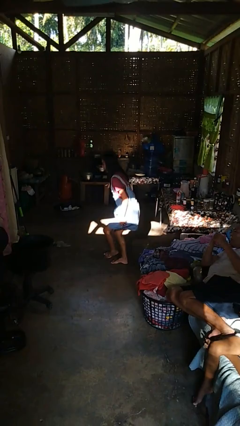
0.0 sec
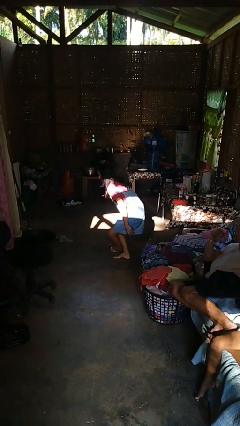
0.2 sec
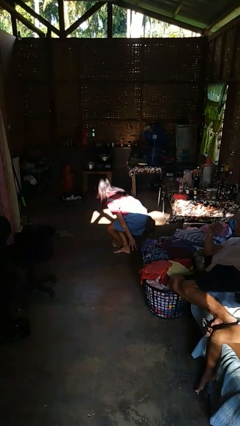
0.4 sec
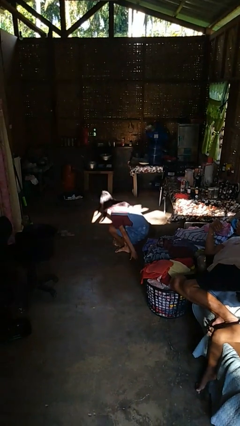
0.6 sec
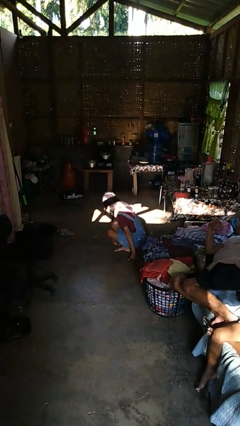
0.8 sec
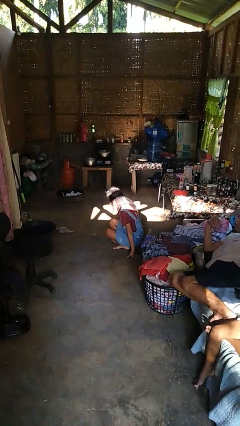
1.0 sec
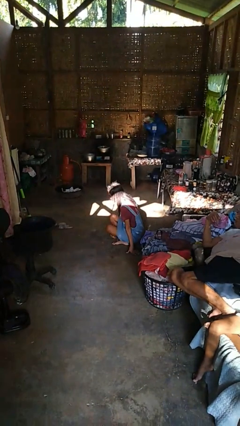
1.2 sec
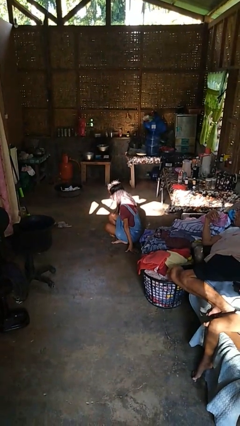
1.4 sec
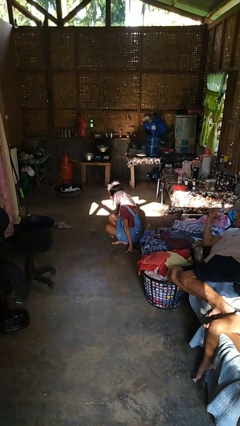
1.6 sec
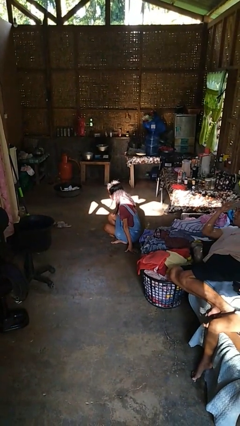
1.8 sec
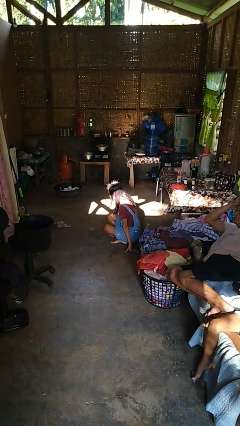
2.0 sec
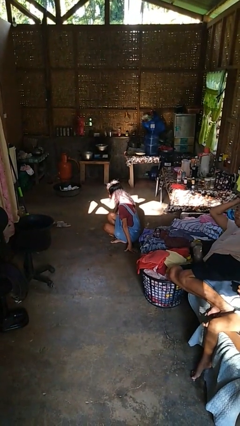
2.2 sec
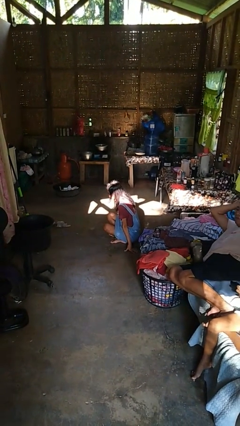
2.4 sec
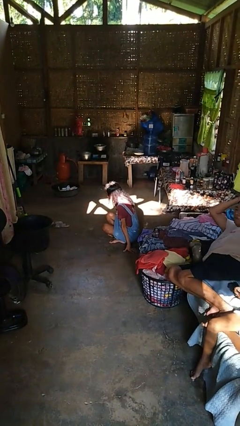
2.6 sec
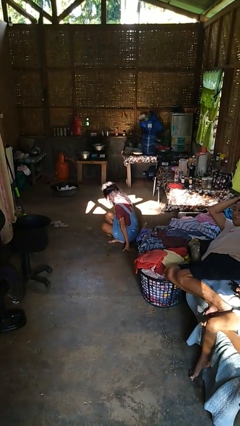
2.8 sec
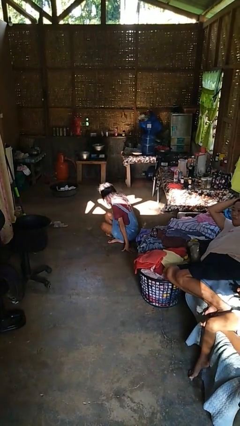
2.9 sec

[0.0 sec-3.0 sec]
person sits crisscross

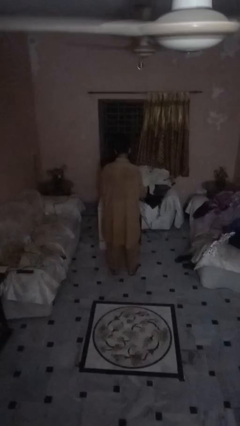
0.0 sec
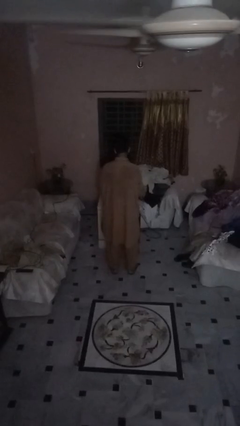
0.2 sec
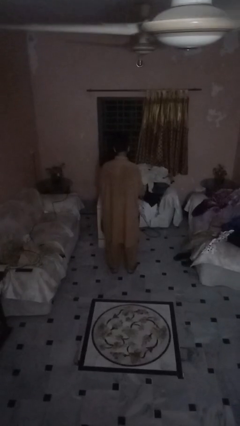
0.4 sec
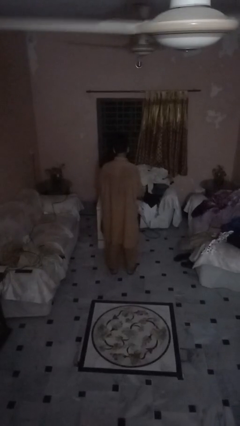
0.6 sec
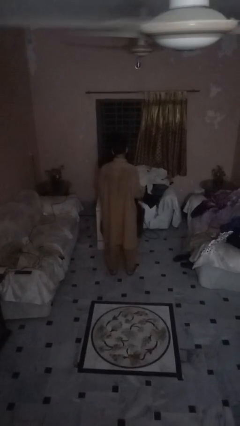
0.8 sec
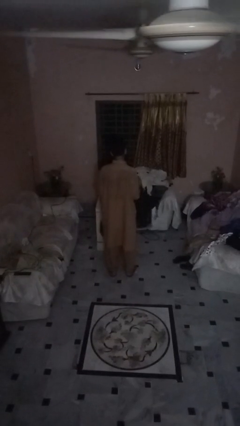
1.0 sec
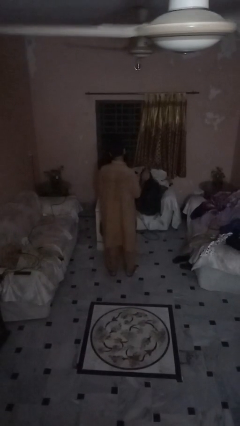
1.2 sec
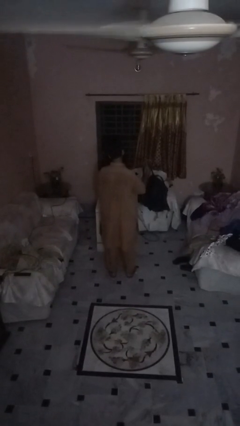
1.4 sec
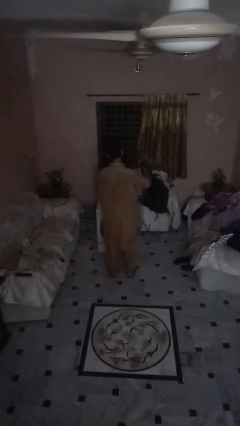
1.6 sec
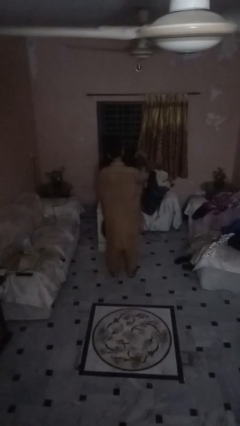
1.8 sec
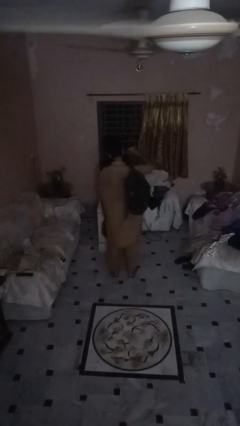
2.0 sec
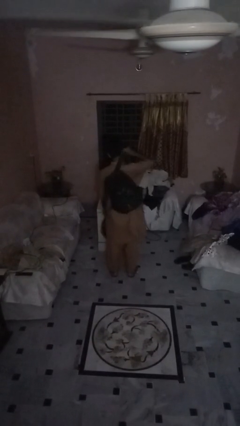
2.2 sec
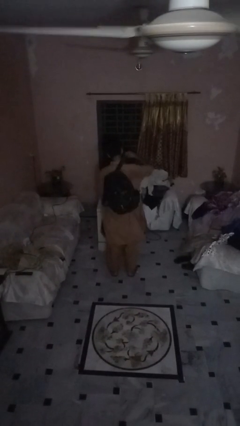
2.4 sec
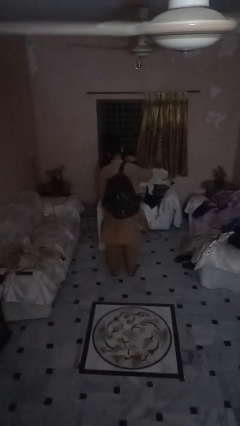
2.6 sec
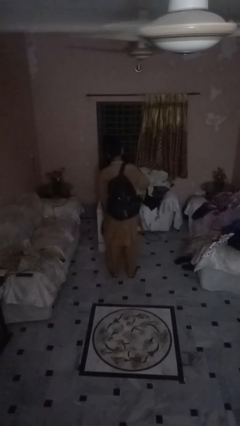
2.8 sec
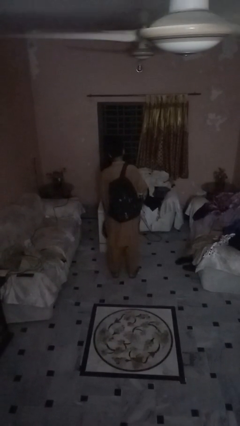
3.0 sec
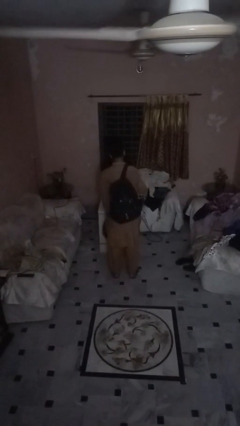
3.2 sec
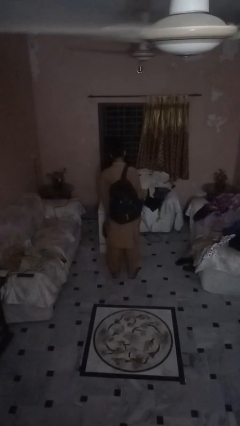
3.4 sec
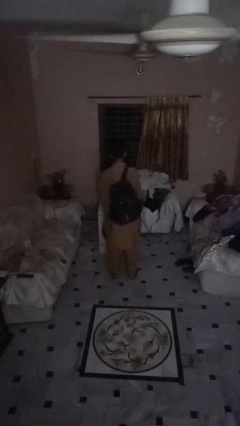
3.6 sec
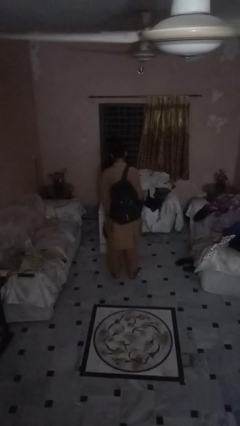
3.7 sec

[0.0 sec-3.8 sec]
person puts on backpack

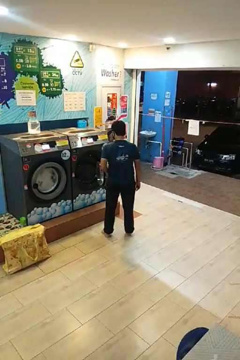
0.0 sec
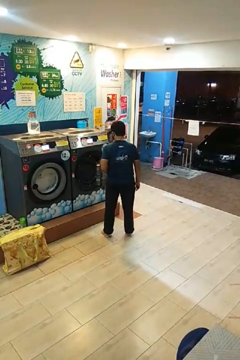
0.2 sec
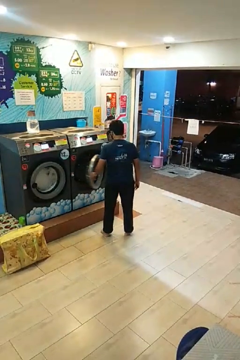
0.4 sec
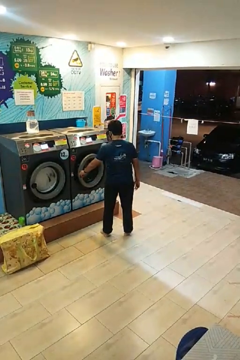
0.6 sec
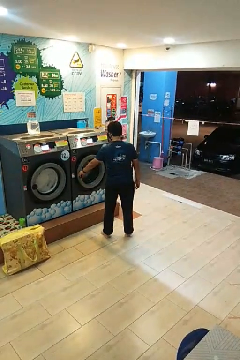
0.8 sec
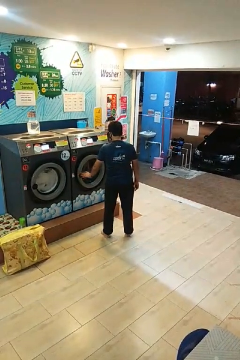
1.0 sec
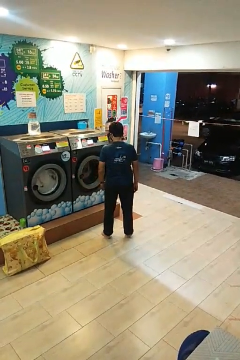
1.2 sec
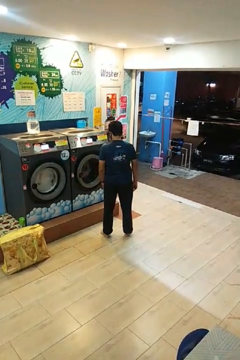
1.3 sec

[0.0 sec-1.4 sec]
person closes clothes washer

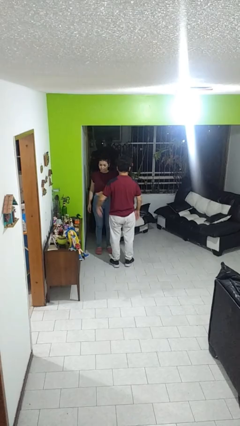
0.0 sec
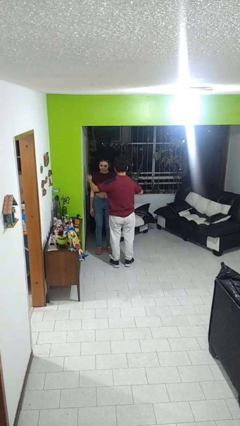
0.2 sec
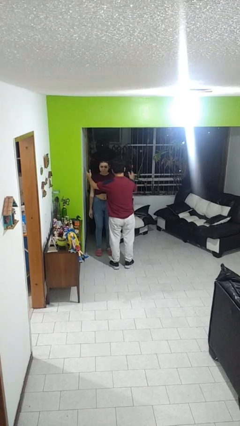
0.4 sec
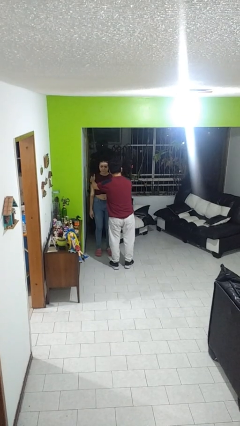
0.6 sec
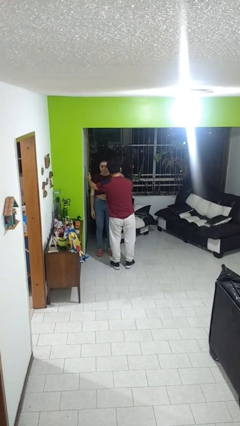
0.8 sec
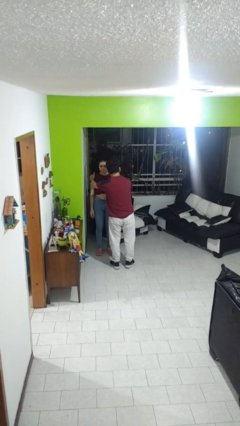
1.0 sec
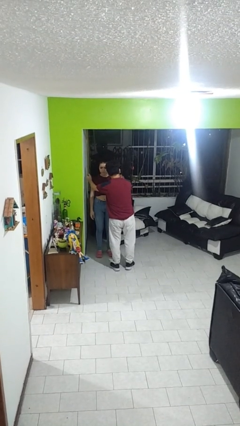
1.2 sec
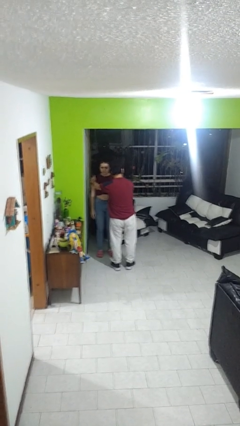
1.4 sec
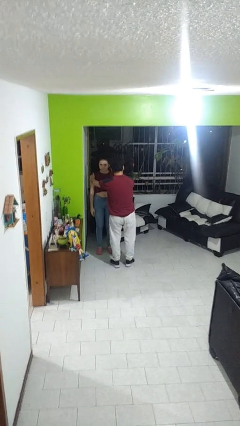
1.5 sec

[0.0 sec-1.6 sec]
person pounds shoulders of person

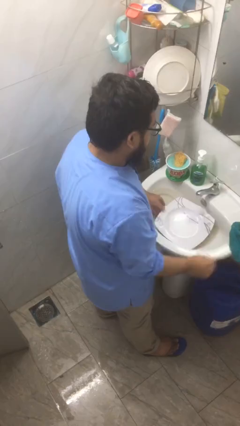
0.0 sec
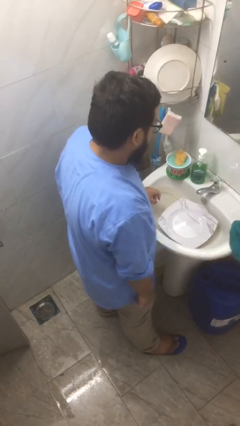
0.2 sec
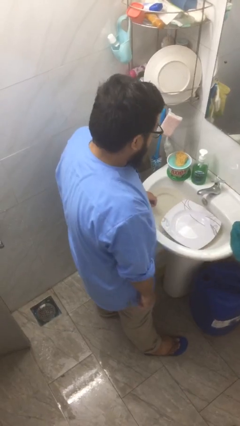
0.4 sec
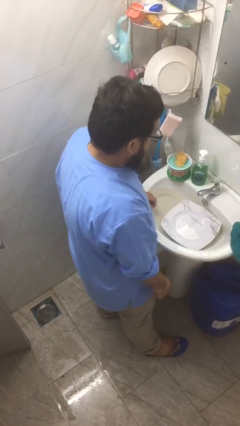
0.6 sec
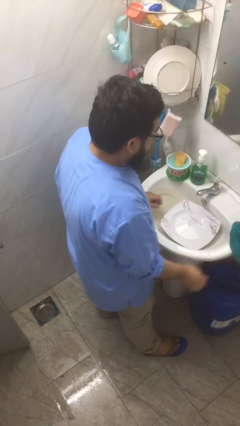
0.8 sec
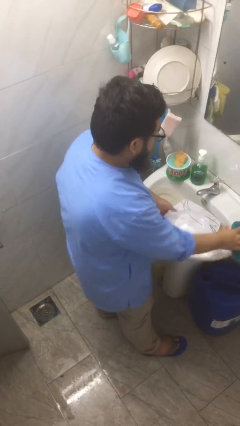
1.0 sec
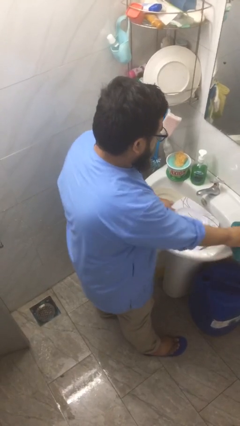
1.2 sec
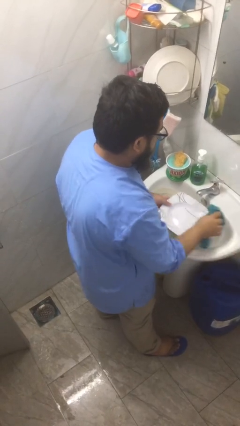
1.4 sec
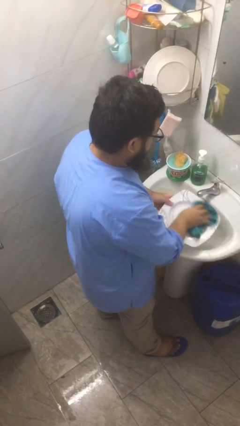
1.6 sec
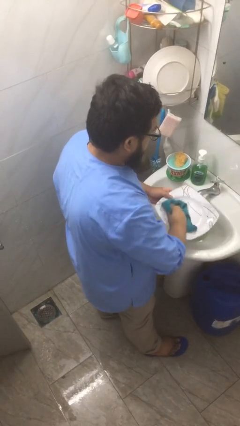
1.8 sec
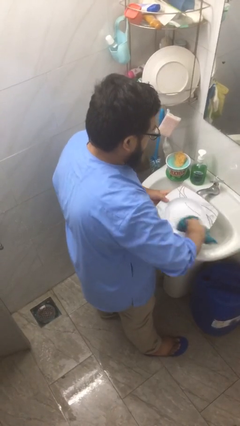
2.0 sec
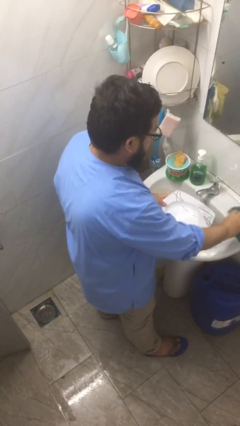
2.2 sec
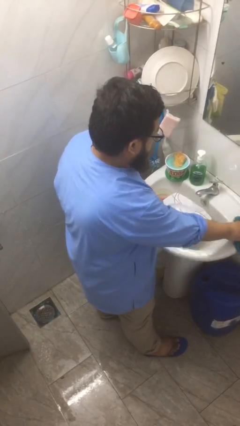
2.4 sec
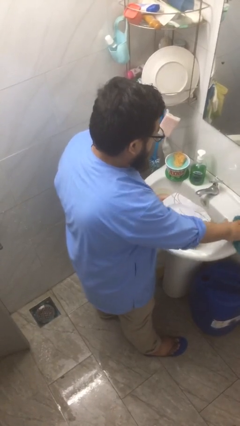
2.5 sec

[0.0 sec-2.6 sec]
person dries dish

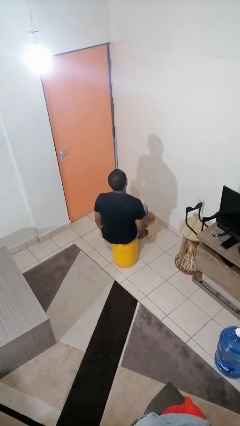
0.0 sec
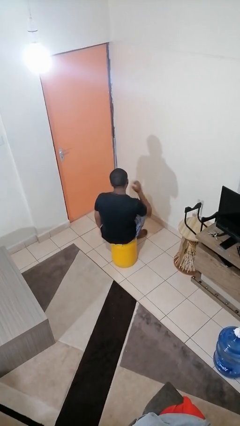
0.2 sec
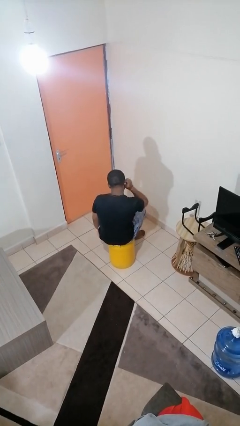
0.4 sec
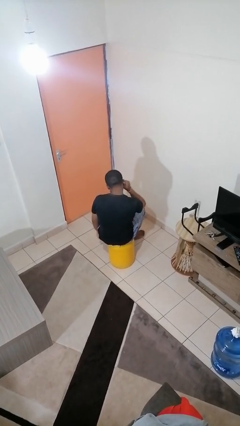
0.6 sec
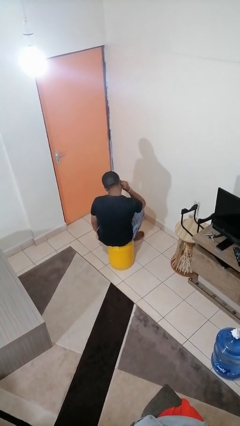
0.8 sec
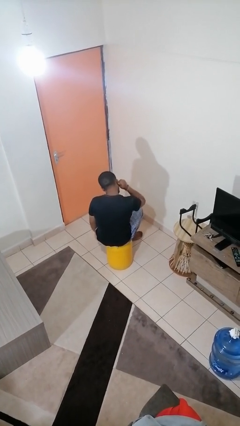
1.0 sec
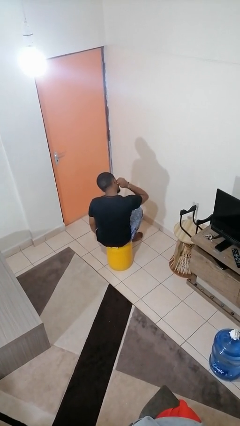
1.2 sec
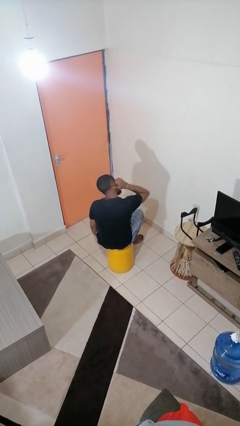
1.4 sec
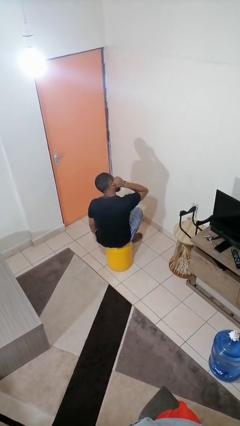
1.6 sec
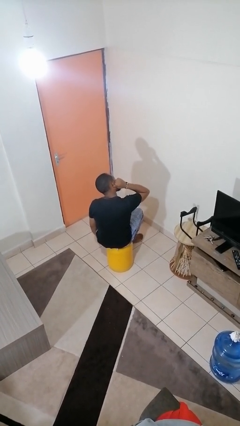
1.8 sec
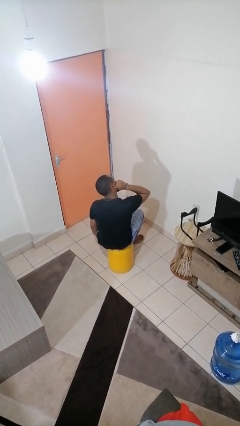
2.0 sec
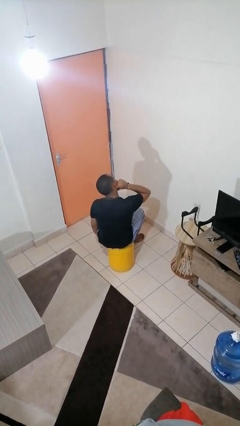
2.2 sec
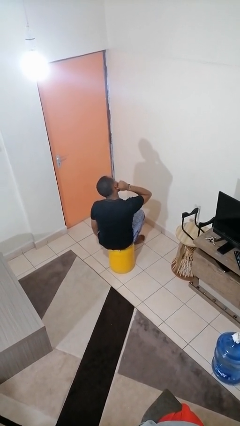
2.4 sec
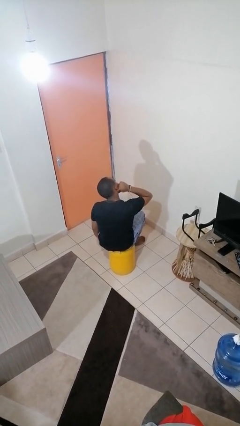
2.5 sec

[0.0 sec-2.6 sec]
person touches earlobe

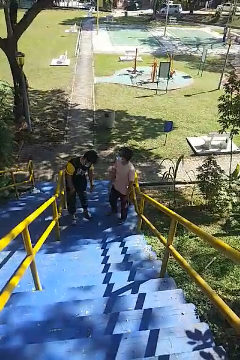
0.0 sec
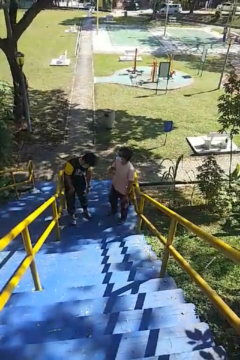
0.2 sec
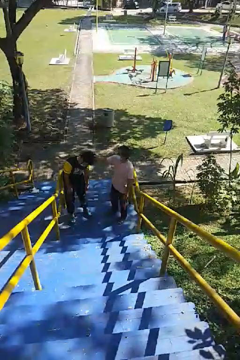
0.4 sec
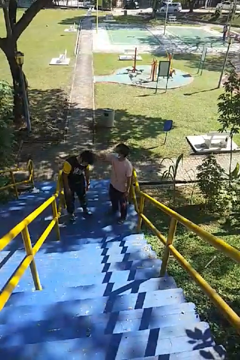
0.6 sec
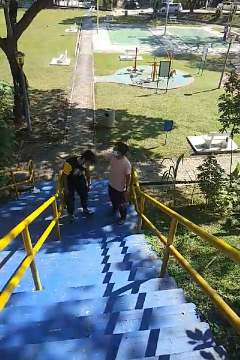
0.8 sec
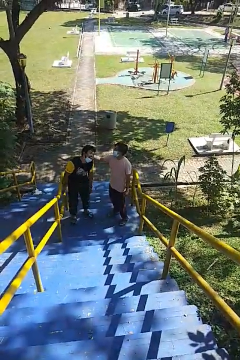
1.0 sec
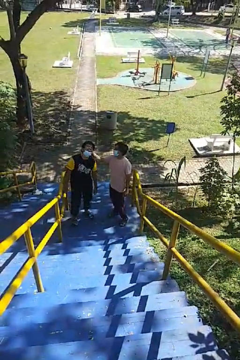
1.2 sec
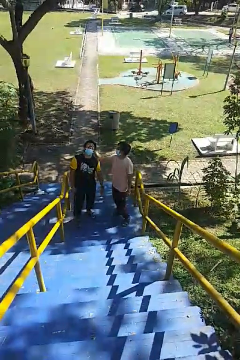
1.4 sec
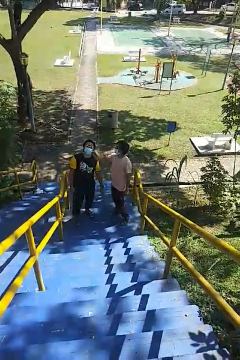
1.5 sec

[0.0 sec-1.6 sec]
person grabs person by hair

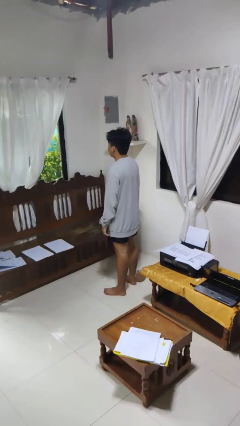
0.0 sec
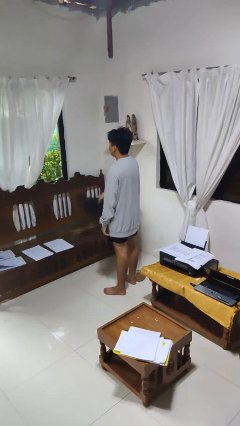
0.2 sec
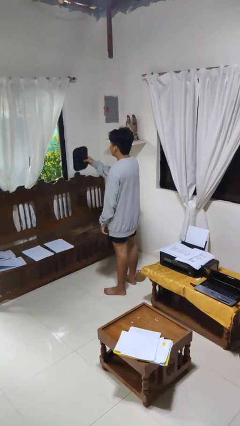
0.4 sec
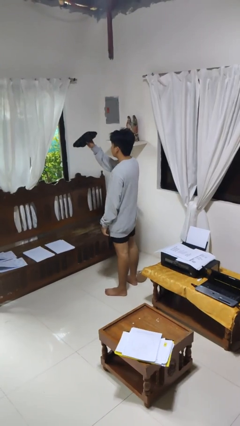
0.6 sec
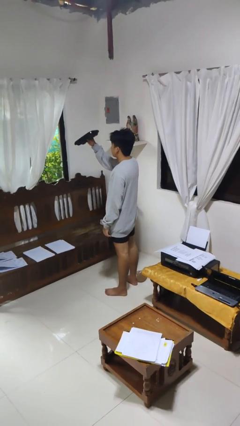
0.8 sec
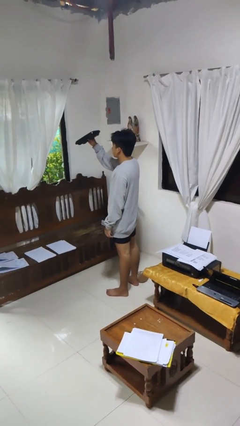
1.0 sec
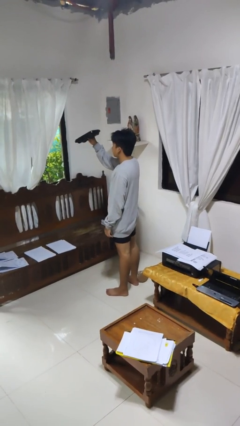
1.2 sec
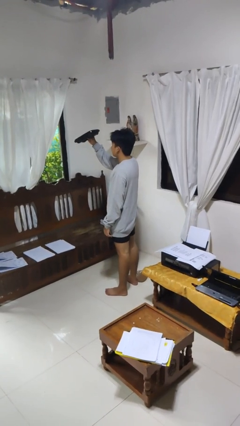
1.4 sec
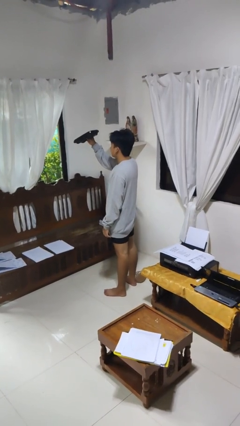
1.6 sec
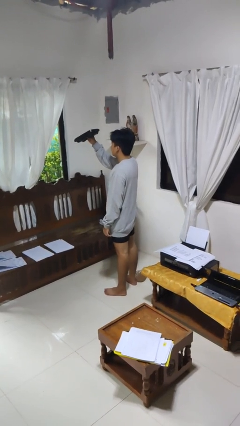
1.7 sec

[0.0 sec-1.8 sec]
person holds object above head
